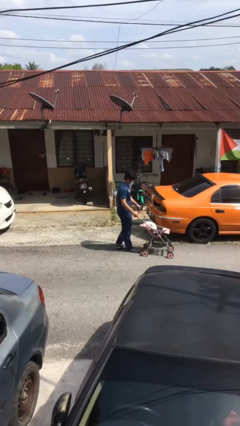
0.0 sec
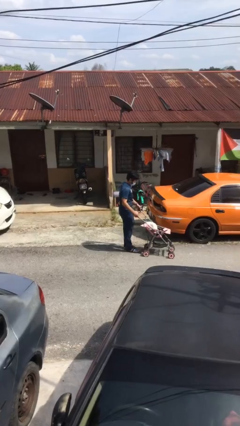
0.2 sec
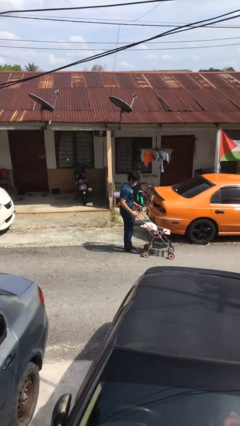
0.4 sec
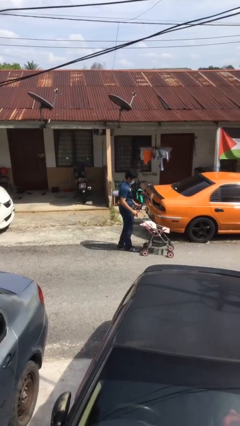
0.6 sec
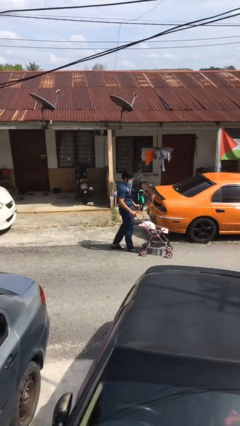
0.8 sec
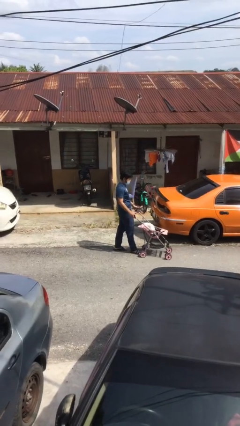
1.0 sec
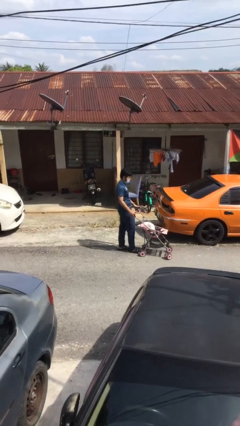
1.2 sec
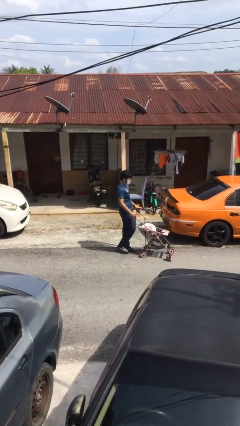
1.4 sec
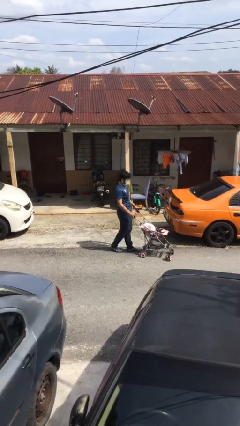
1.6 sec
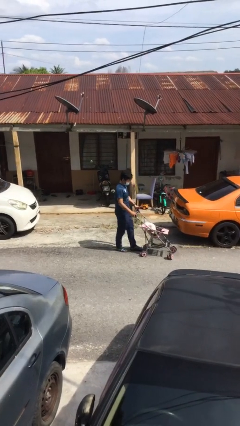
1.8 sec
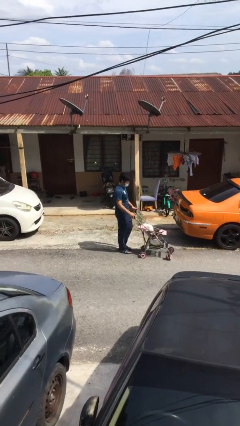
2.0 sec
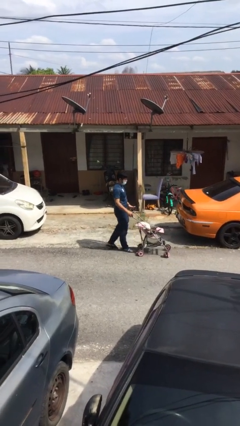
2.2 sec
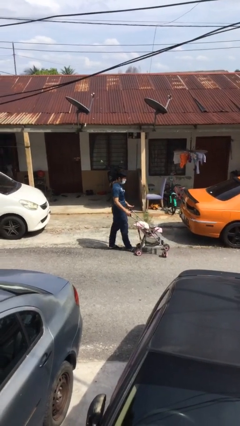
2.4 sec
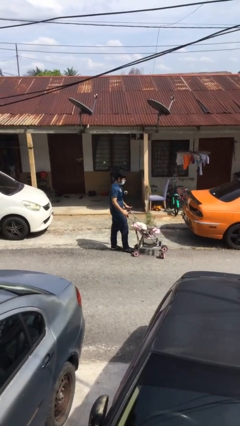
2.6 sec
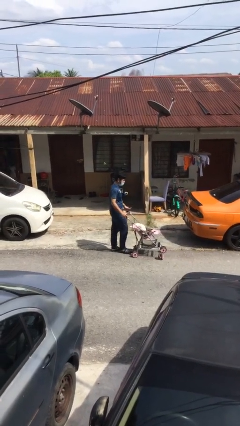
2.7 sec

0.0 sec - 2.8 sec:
person pulls wheeled cart

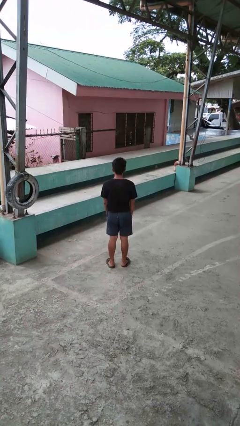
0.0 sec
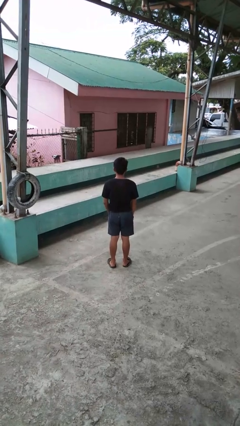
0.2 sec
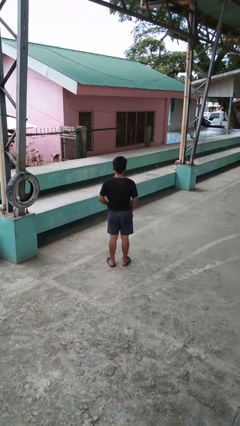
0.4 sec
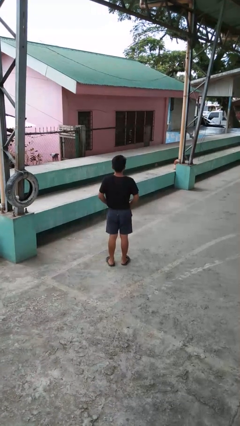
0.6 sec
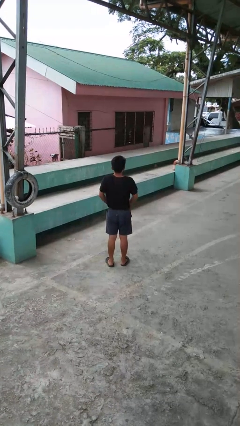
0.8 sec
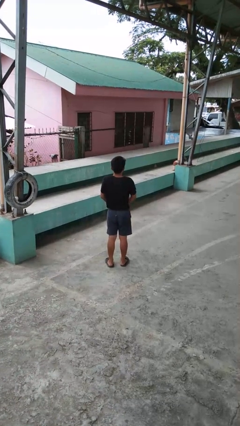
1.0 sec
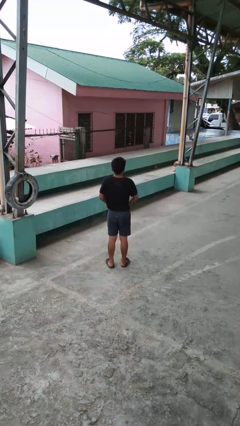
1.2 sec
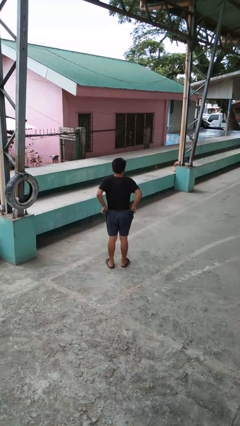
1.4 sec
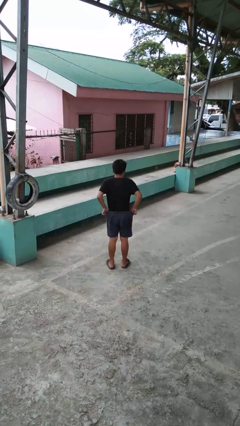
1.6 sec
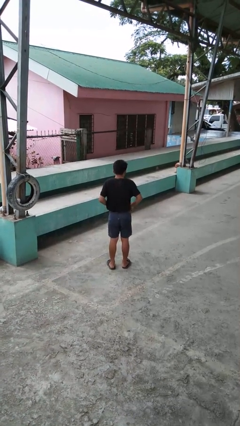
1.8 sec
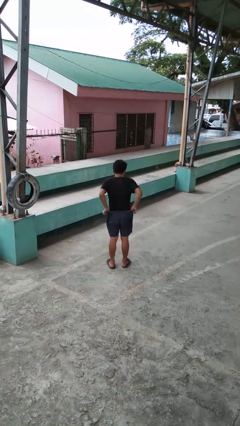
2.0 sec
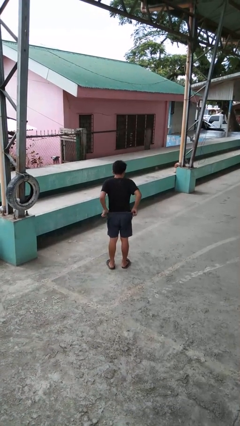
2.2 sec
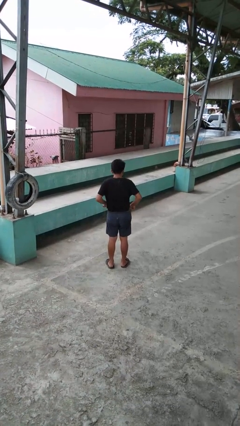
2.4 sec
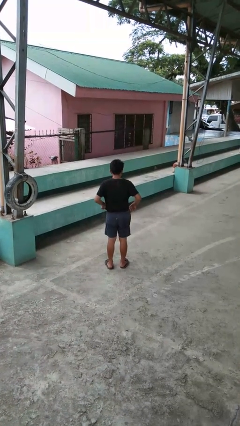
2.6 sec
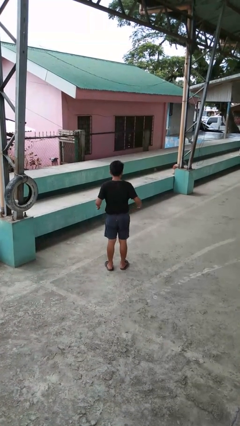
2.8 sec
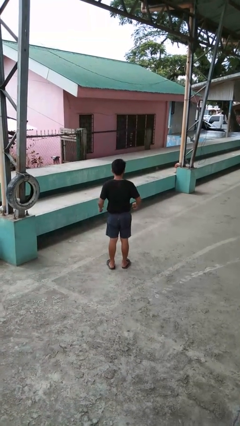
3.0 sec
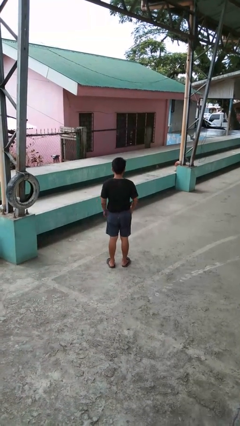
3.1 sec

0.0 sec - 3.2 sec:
person hikes up pants

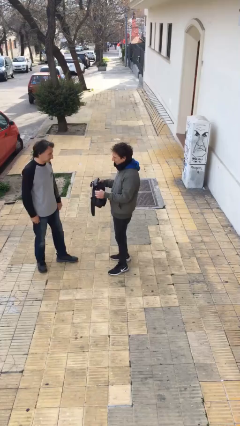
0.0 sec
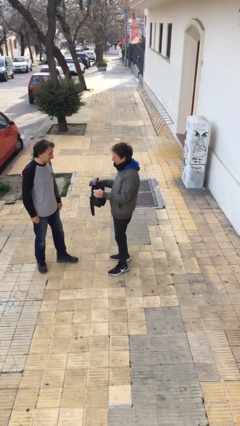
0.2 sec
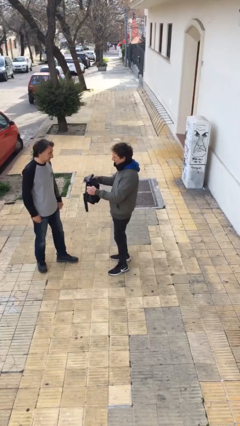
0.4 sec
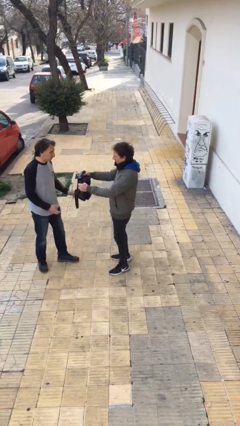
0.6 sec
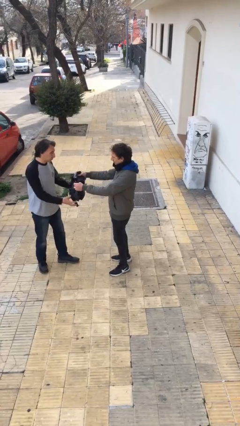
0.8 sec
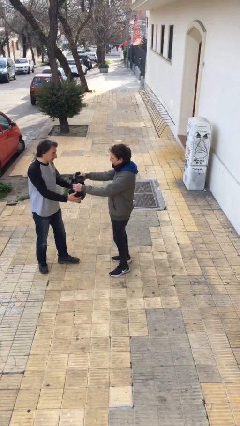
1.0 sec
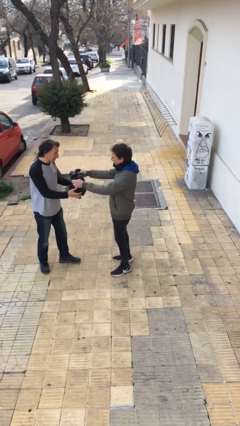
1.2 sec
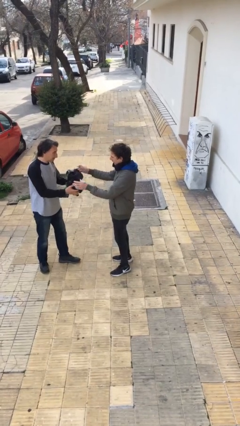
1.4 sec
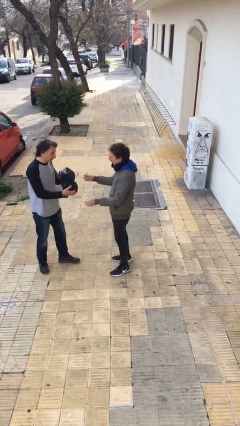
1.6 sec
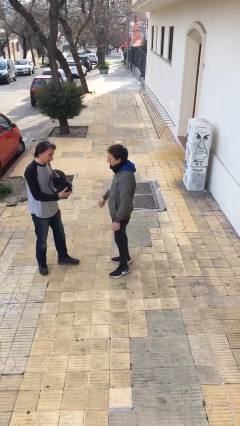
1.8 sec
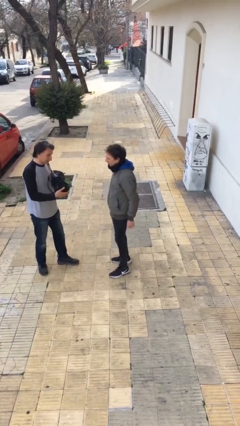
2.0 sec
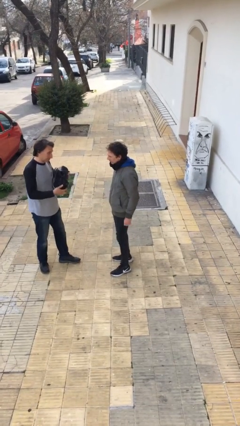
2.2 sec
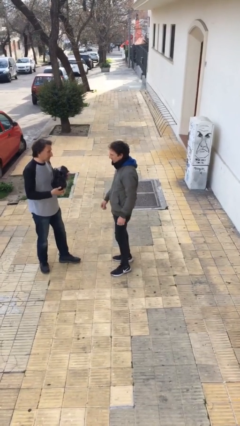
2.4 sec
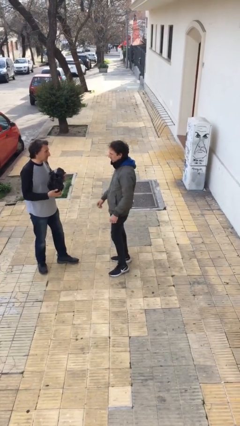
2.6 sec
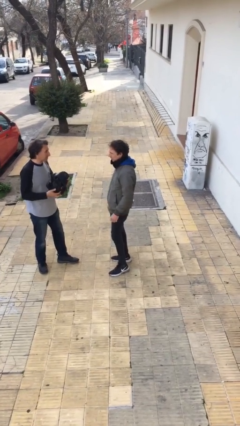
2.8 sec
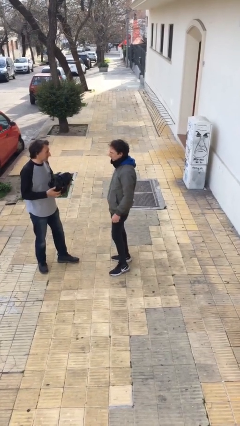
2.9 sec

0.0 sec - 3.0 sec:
person transfers object to person

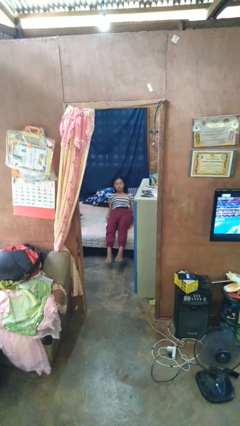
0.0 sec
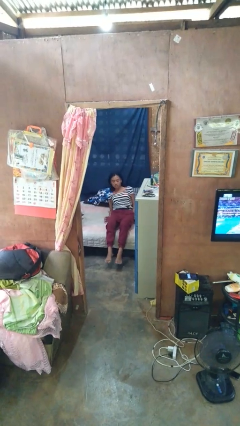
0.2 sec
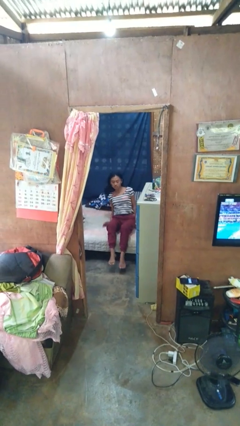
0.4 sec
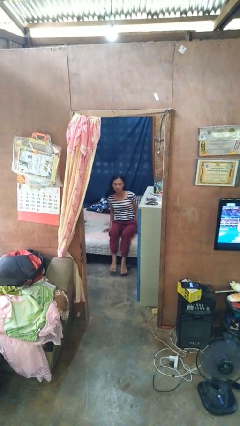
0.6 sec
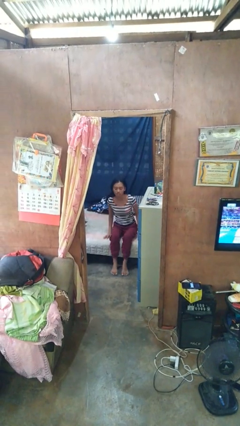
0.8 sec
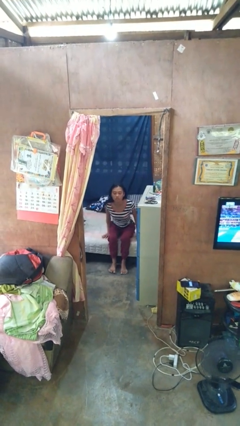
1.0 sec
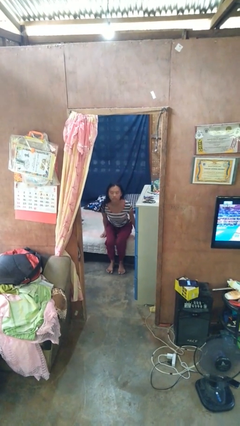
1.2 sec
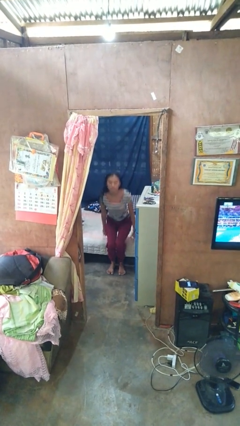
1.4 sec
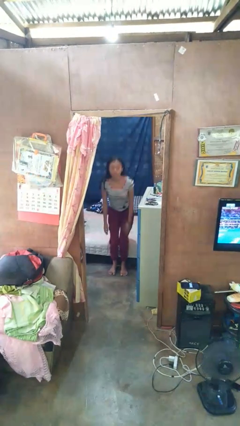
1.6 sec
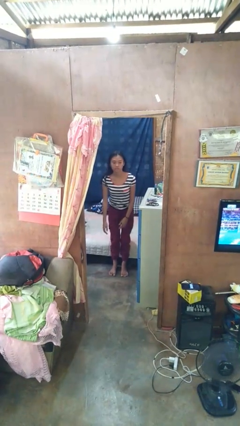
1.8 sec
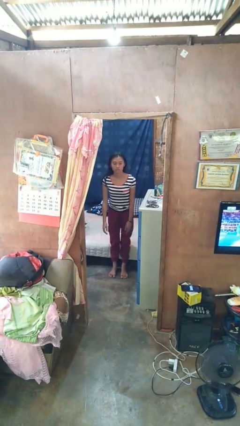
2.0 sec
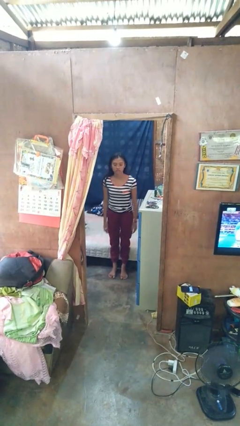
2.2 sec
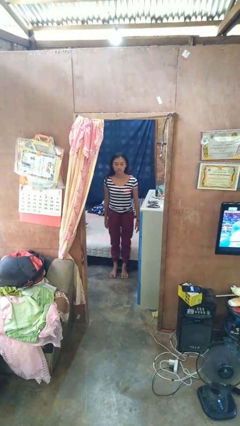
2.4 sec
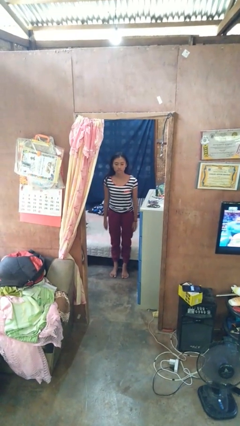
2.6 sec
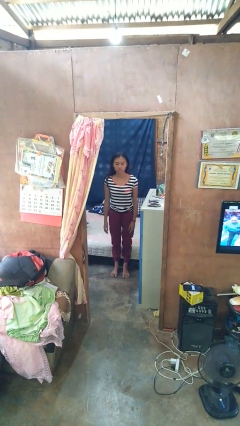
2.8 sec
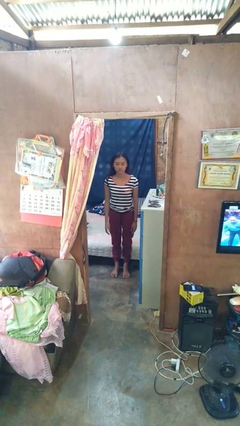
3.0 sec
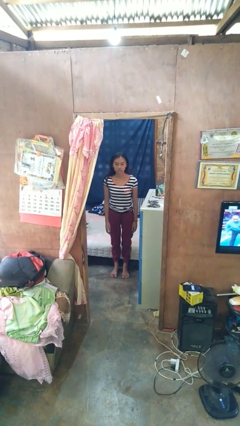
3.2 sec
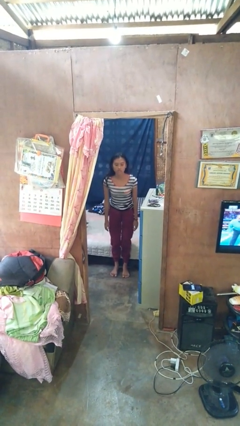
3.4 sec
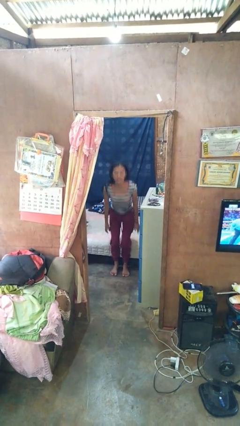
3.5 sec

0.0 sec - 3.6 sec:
person stands up

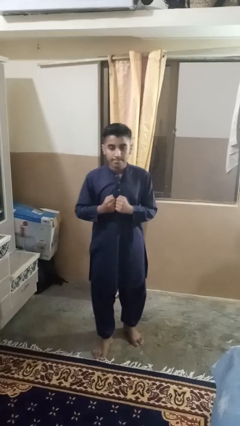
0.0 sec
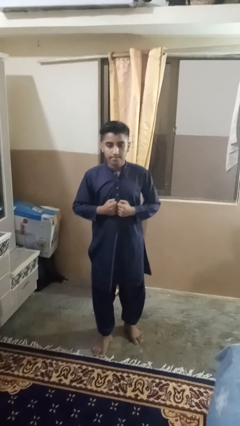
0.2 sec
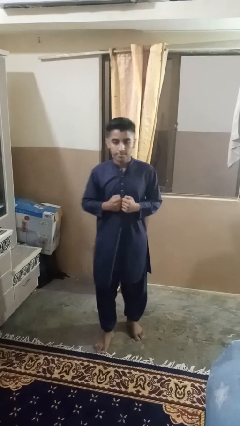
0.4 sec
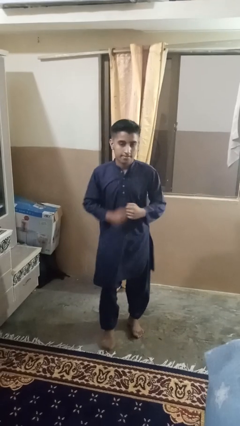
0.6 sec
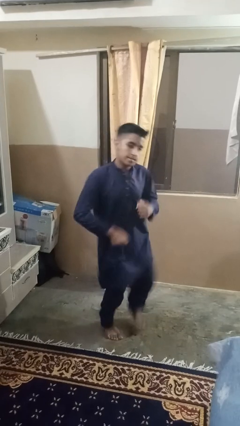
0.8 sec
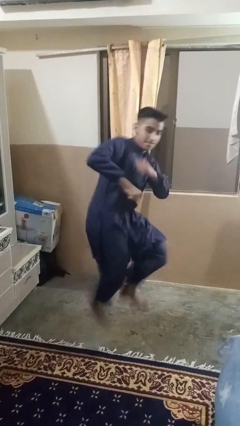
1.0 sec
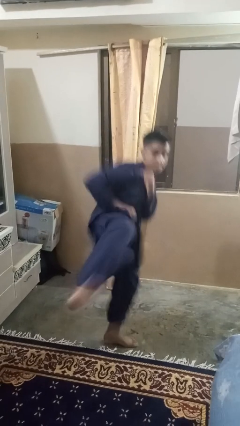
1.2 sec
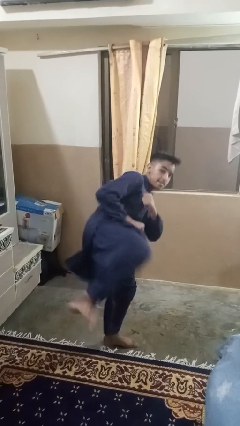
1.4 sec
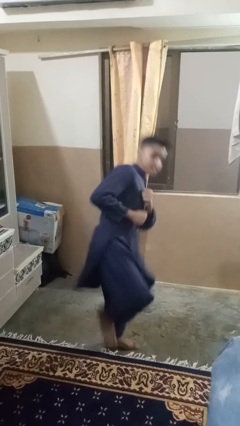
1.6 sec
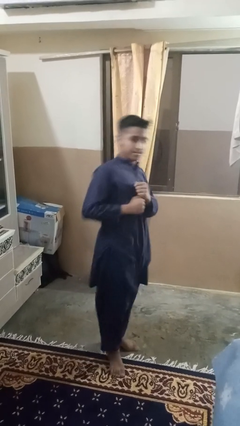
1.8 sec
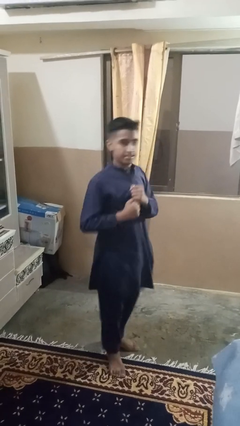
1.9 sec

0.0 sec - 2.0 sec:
person karate kicks

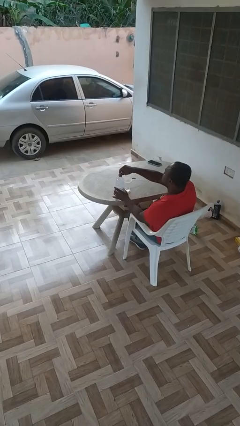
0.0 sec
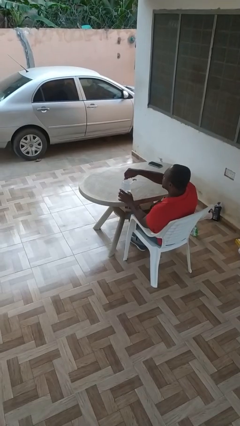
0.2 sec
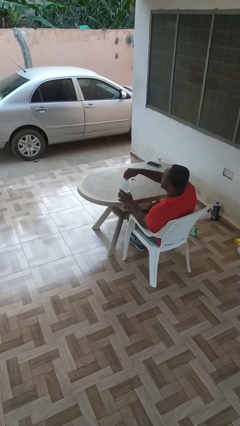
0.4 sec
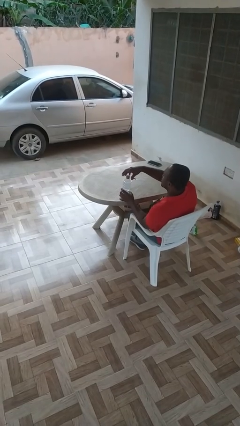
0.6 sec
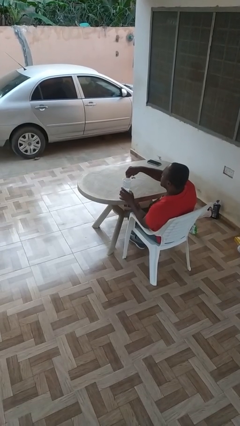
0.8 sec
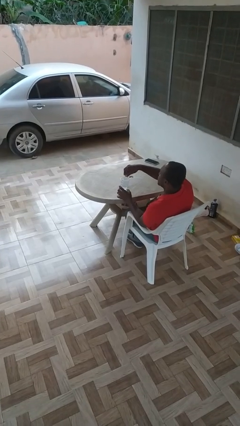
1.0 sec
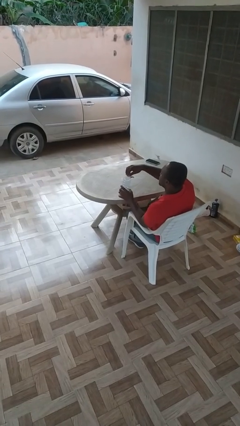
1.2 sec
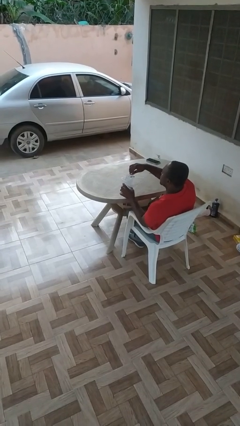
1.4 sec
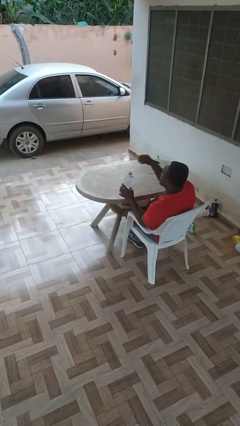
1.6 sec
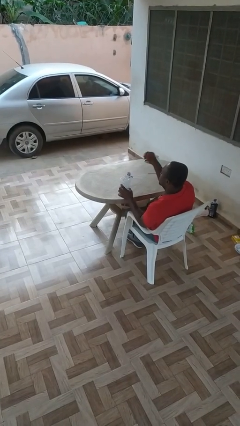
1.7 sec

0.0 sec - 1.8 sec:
person unscrews lid from bottle

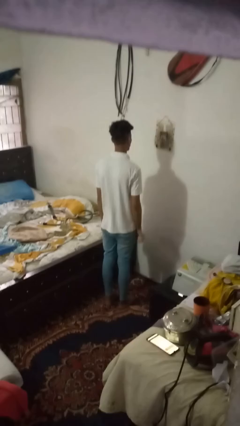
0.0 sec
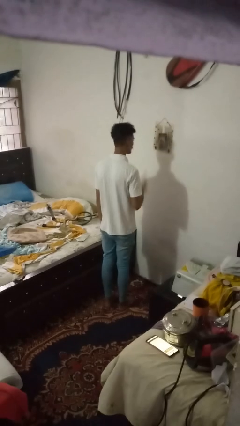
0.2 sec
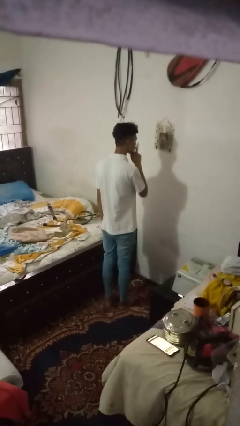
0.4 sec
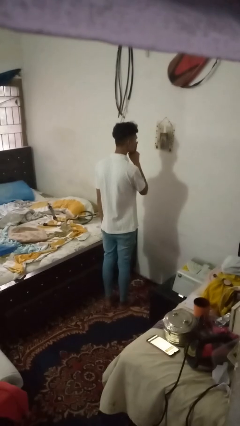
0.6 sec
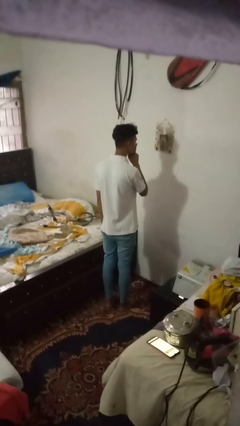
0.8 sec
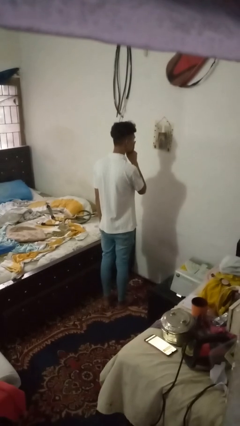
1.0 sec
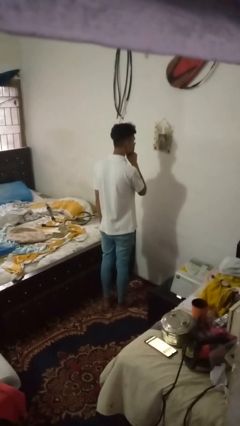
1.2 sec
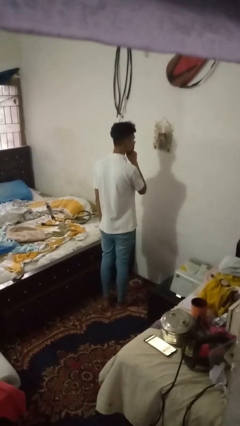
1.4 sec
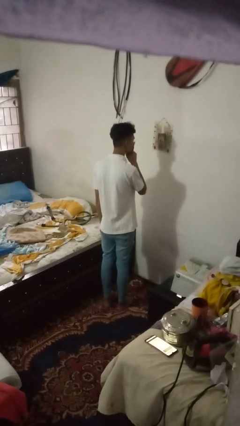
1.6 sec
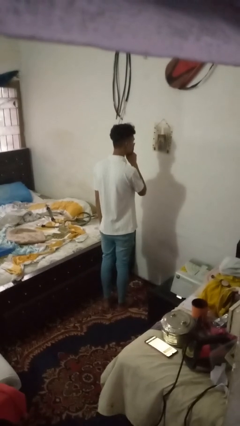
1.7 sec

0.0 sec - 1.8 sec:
person gestures be quiet
